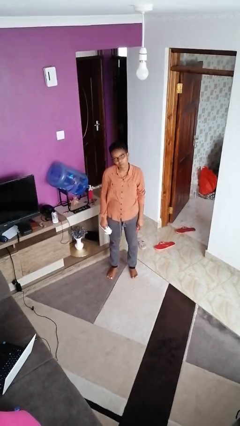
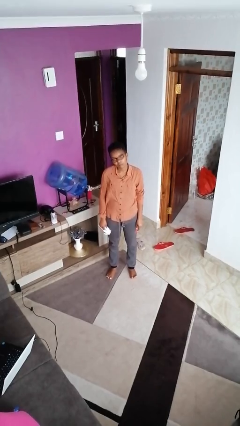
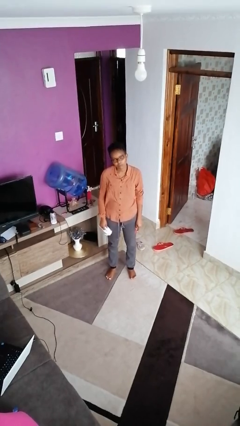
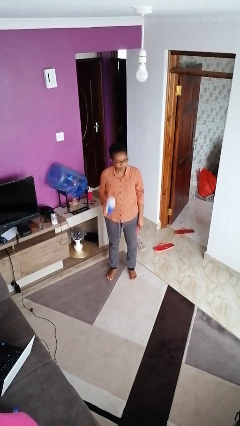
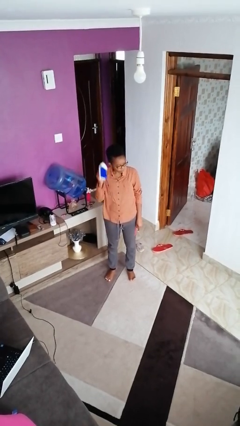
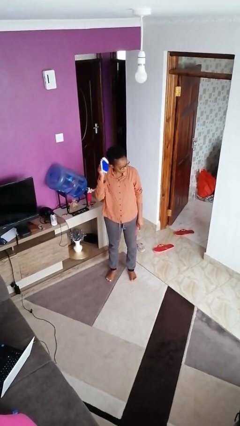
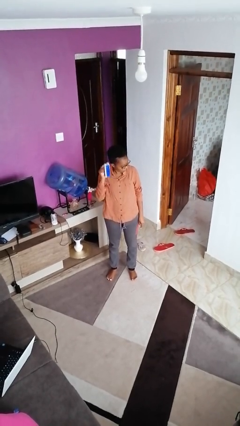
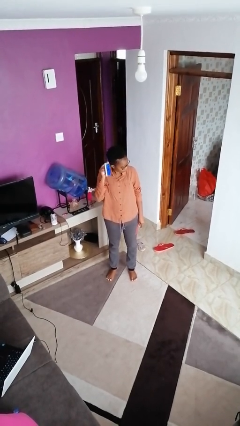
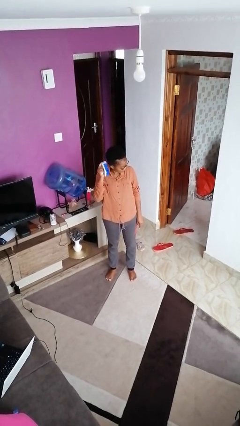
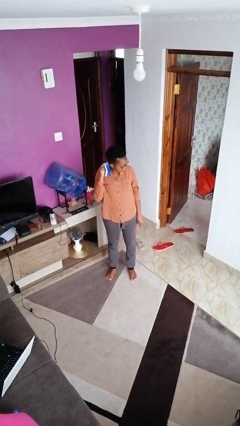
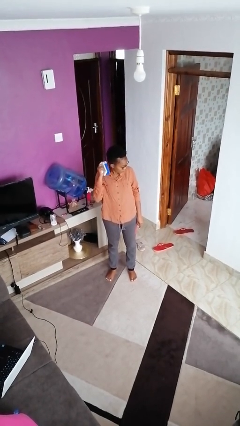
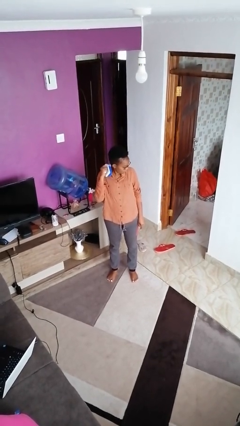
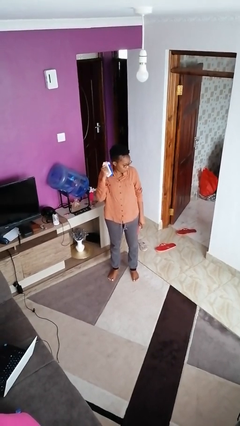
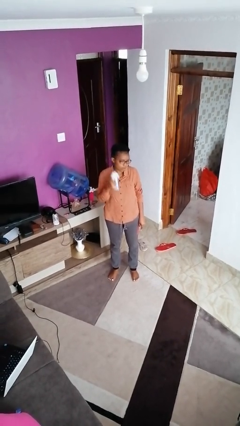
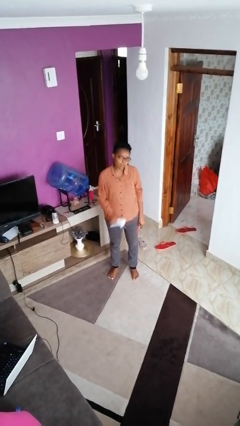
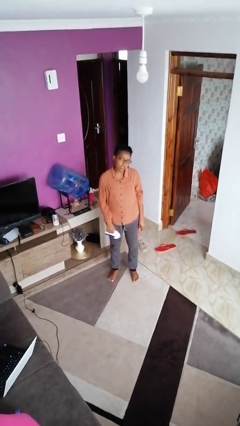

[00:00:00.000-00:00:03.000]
person brushes hair

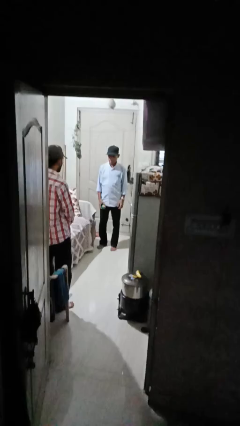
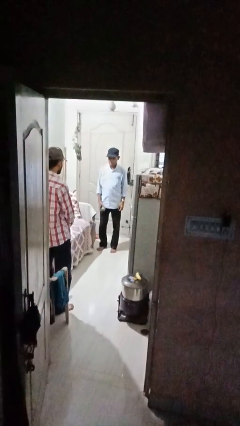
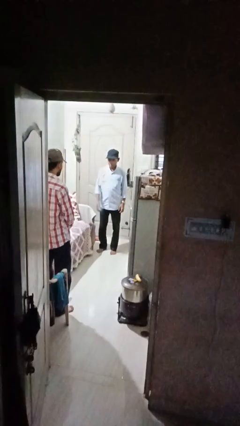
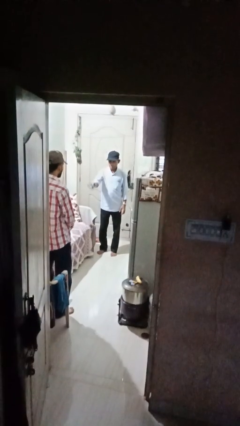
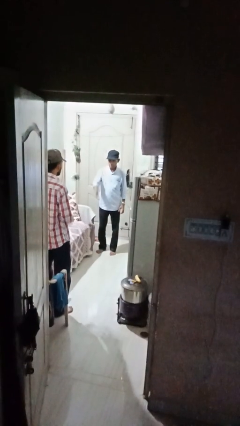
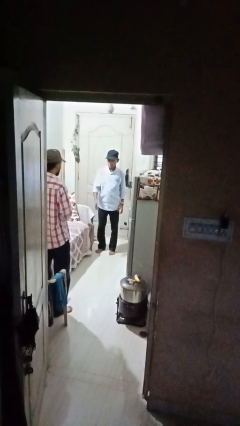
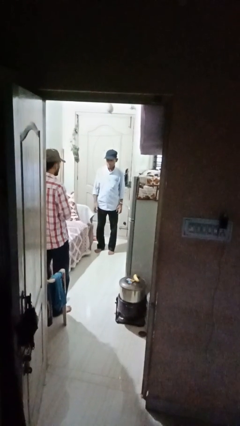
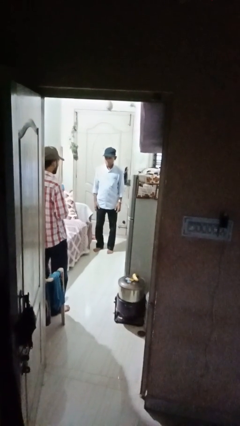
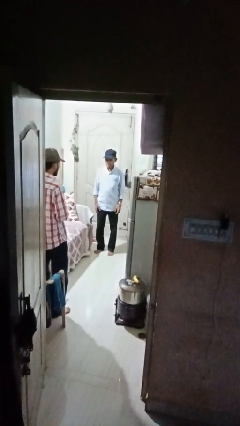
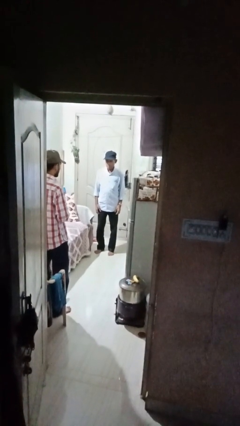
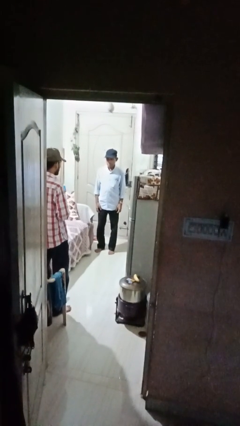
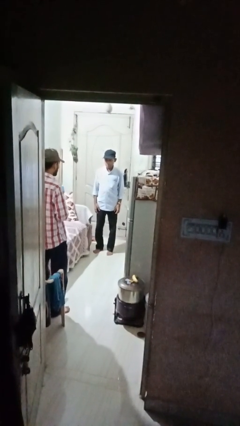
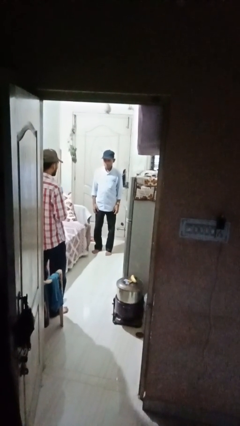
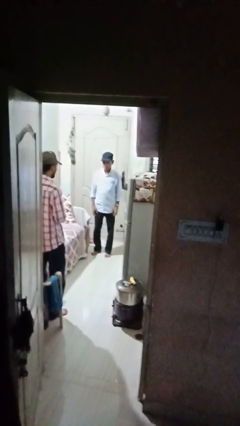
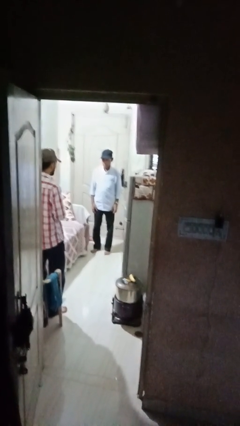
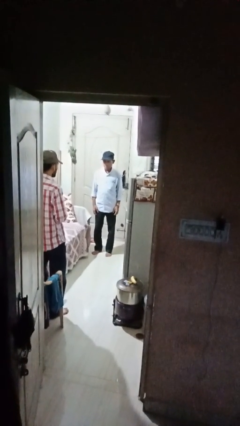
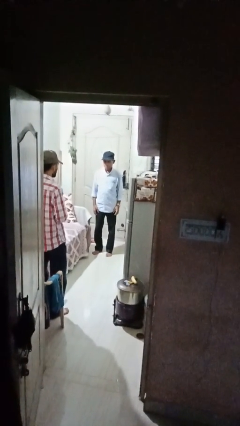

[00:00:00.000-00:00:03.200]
person throws object to person

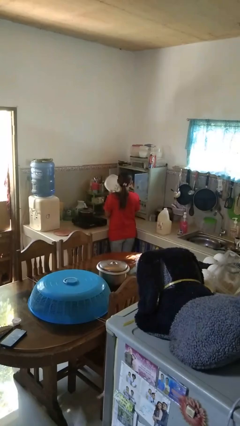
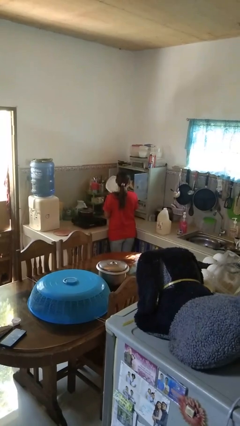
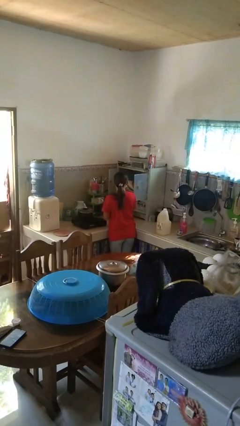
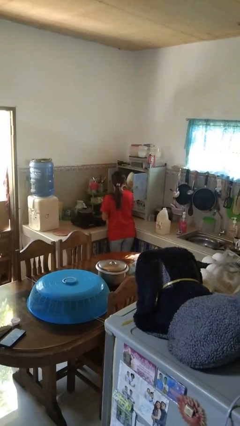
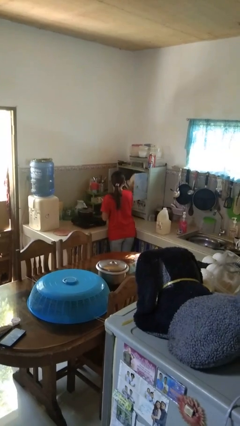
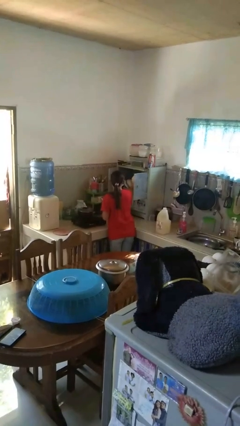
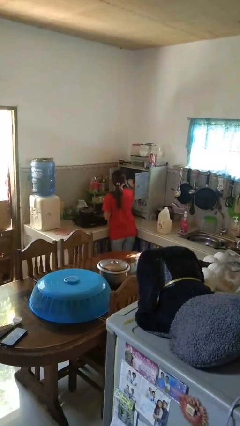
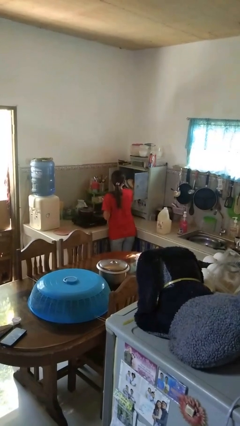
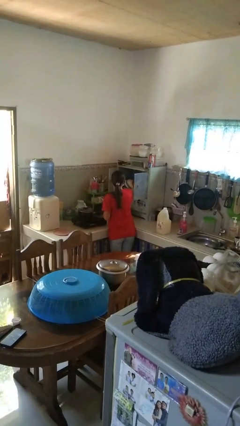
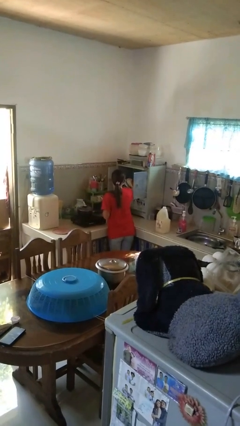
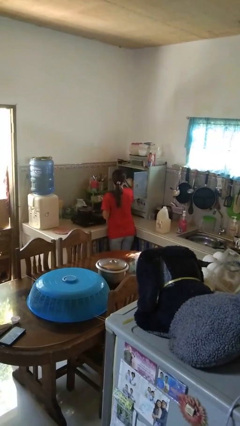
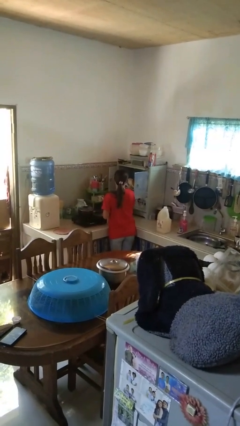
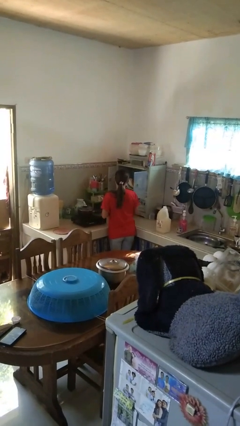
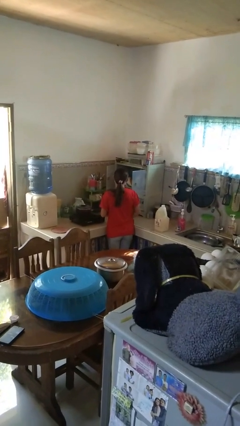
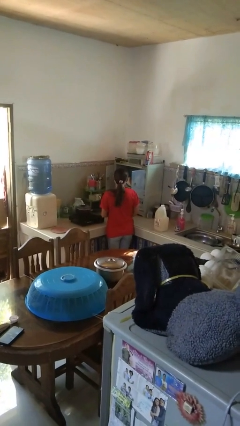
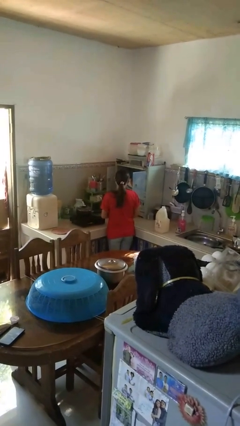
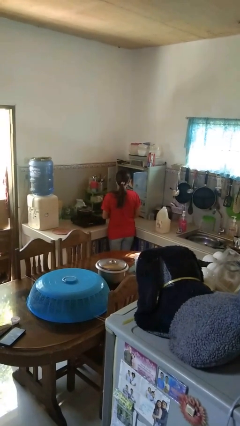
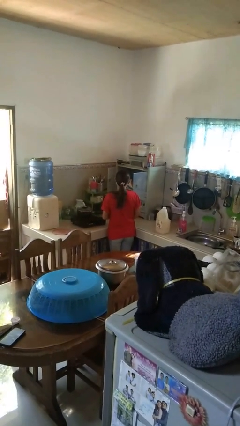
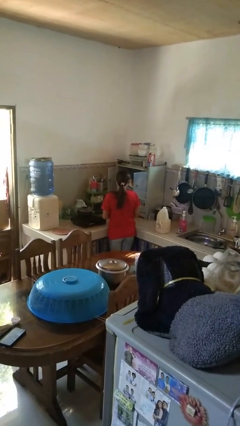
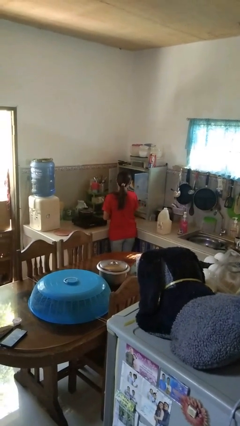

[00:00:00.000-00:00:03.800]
person puts object in cabinet

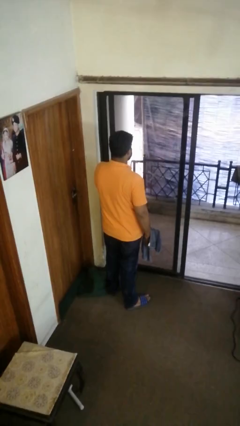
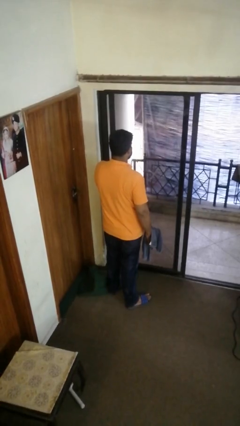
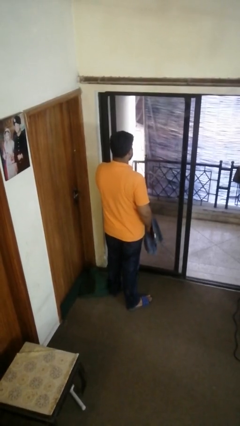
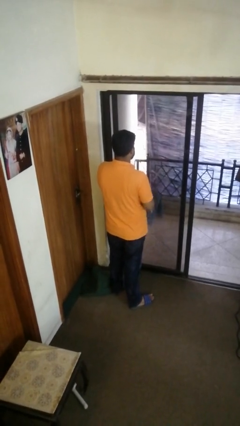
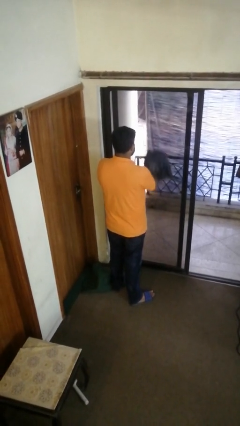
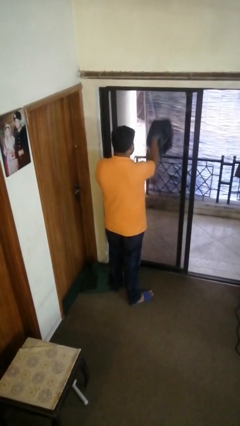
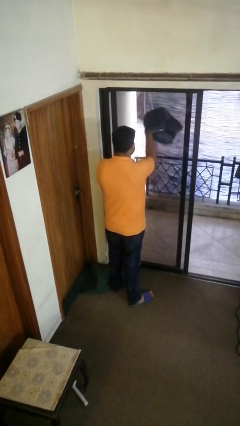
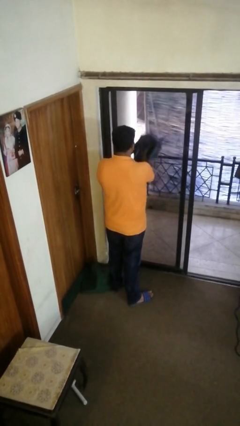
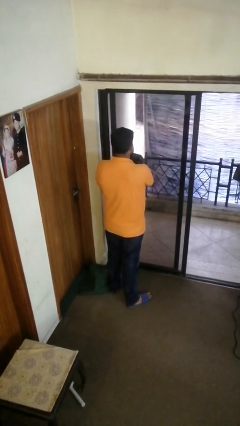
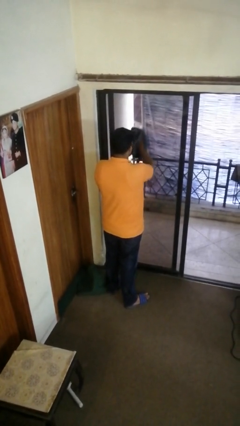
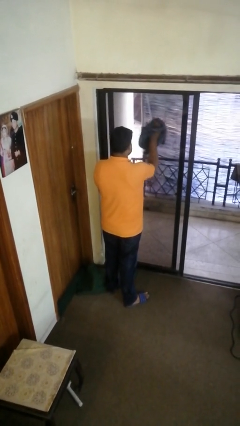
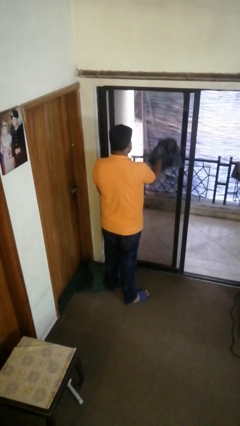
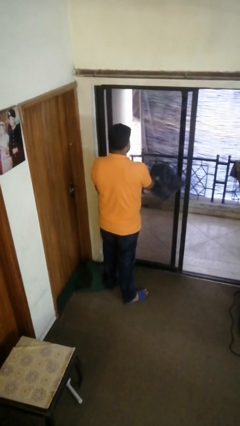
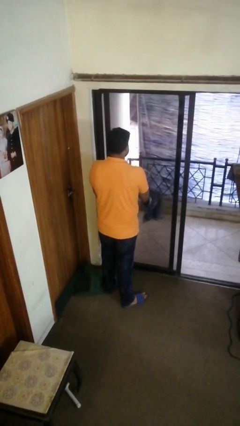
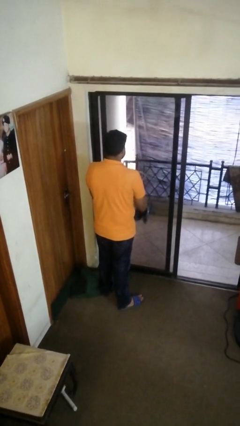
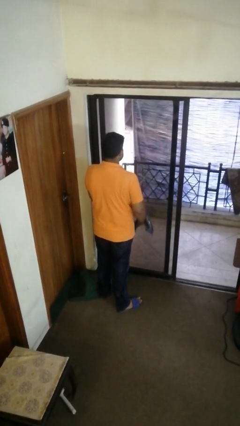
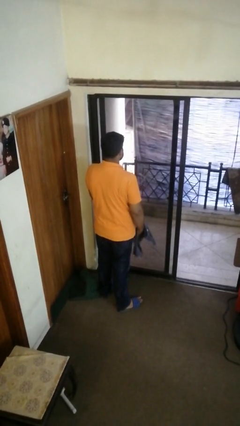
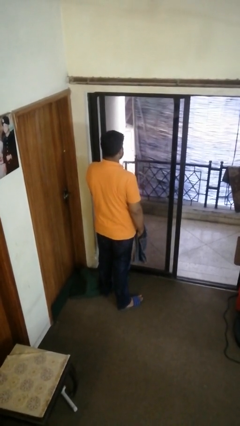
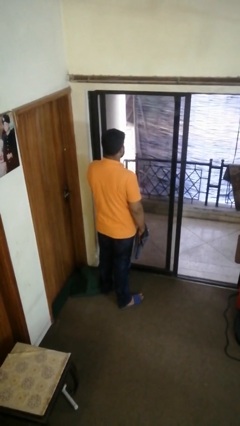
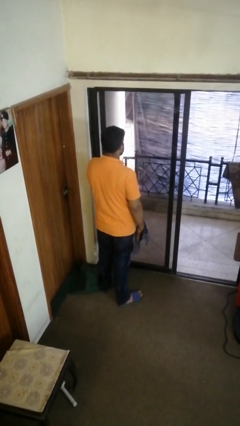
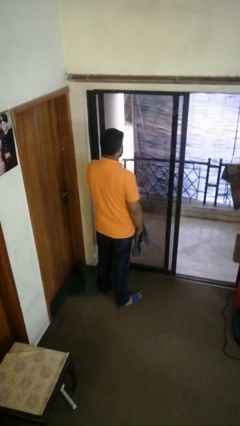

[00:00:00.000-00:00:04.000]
person washes window

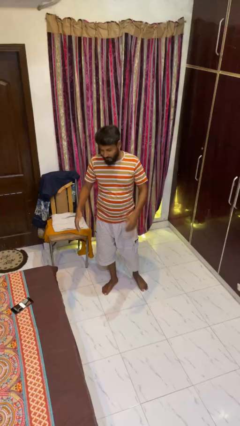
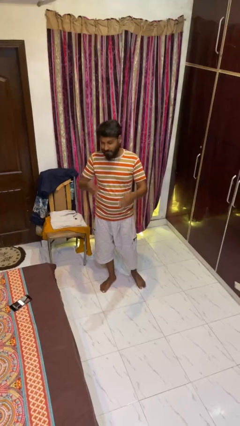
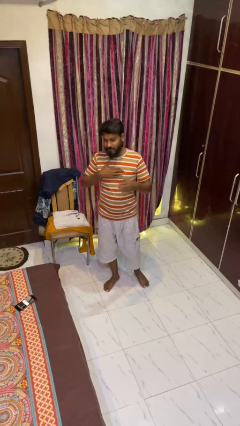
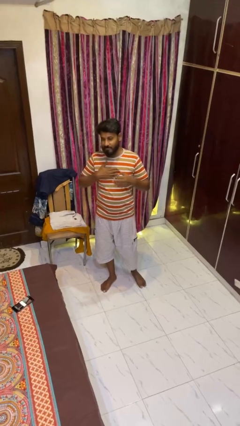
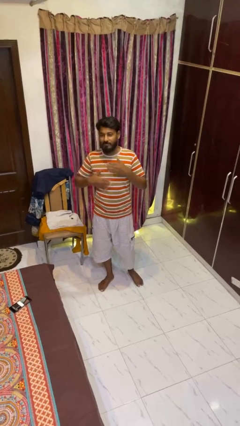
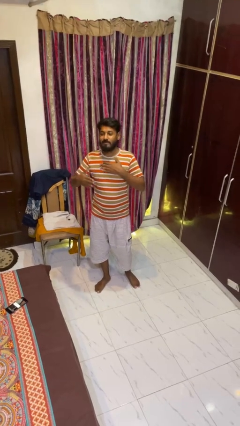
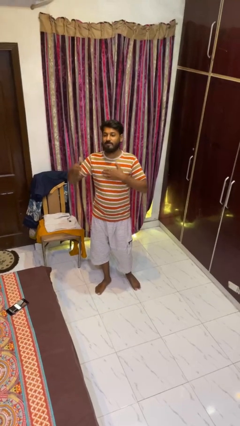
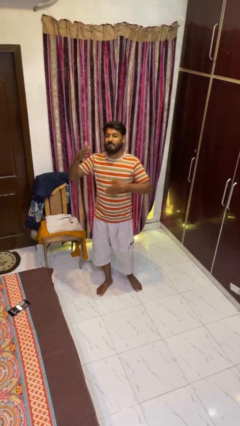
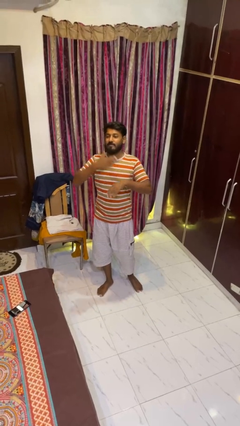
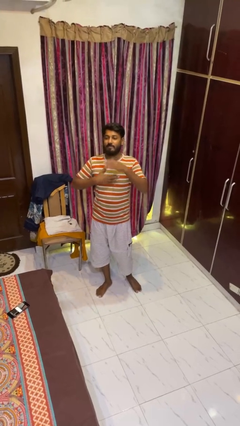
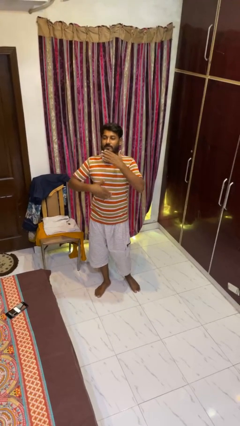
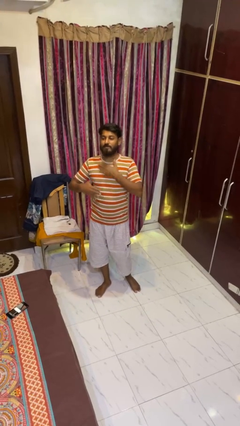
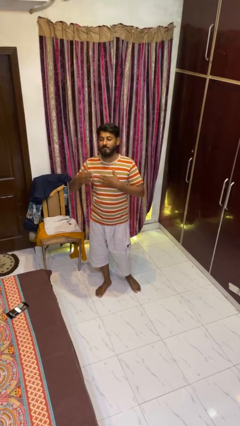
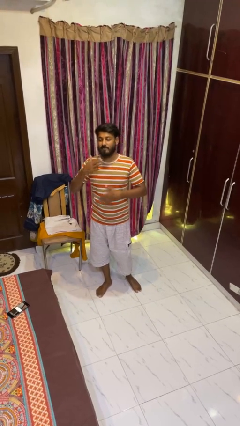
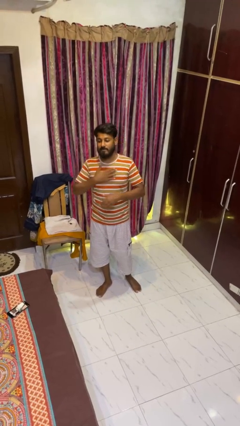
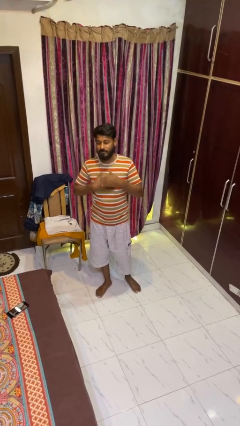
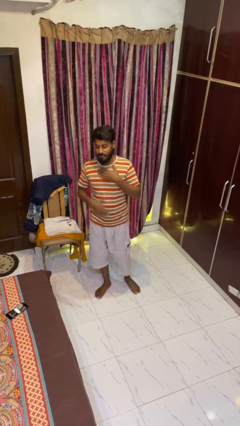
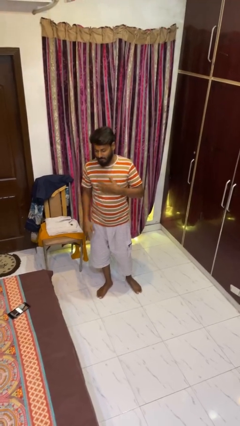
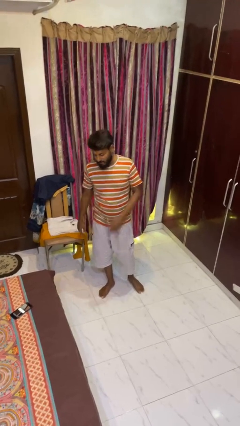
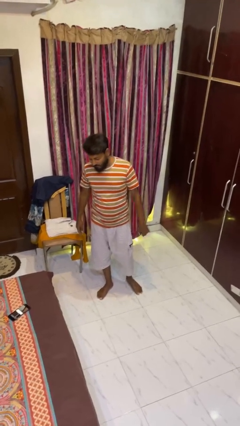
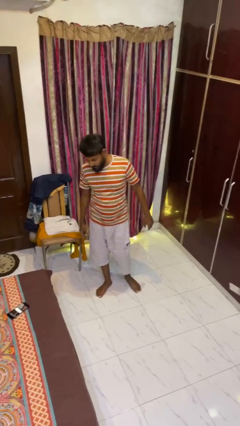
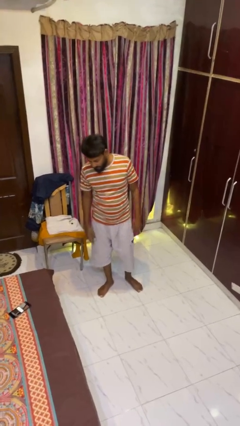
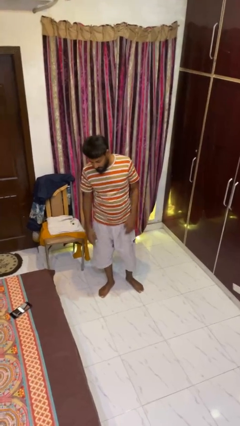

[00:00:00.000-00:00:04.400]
person drums on chest
